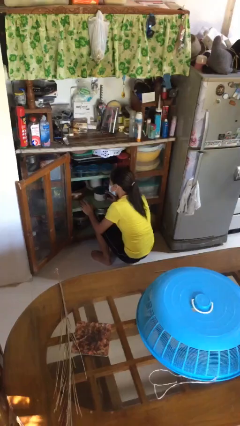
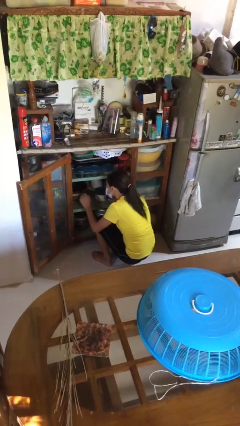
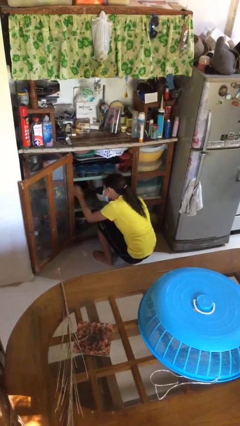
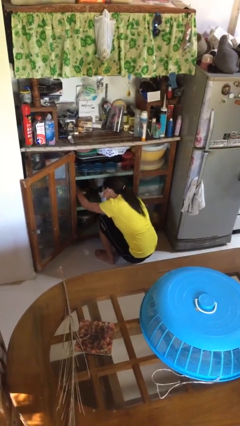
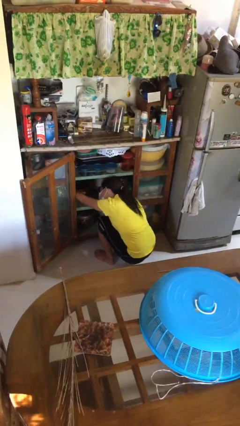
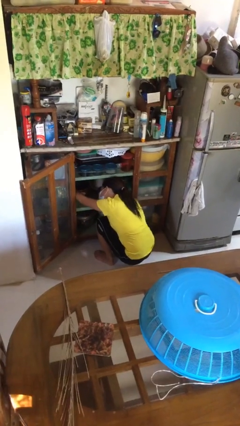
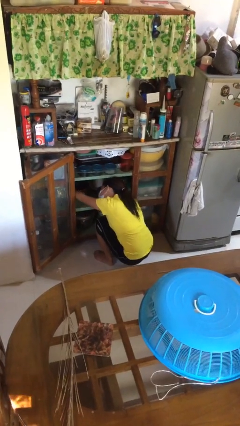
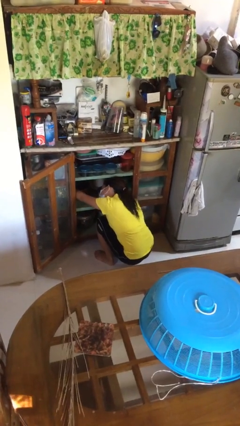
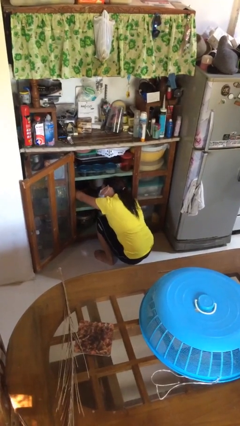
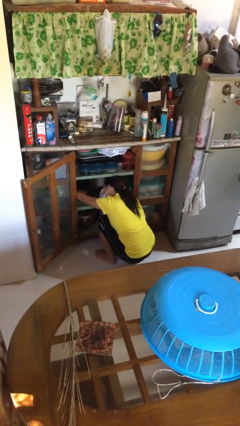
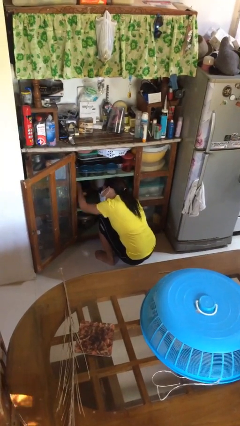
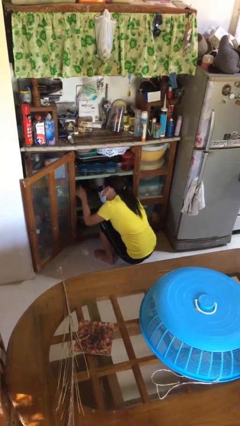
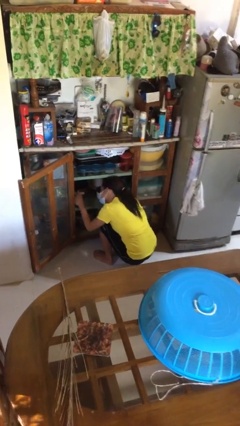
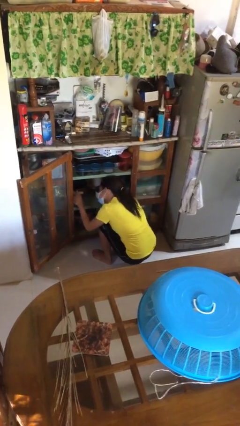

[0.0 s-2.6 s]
person searches in cabinet

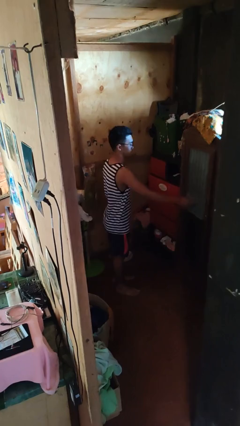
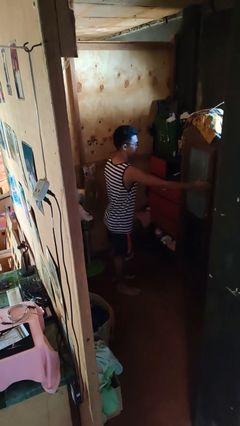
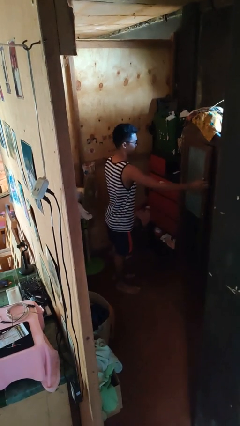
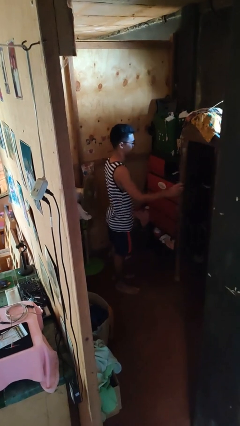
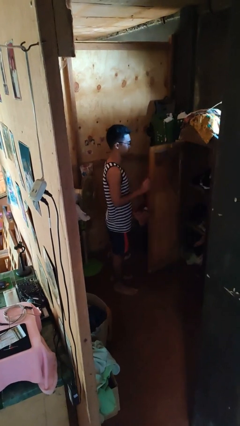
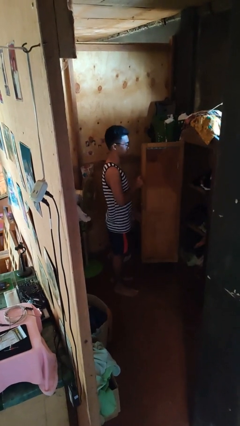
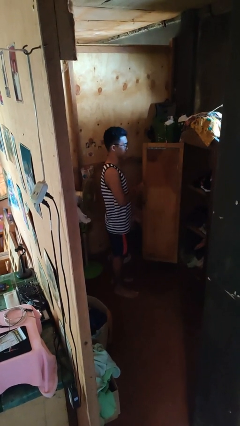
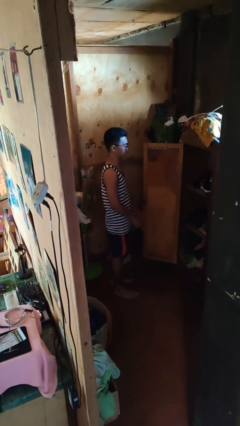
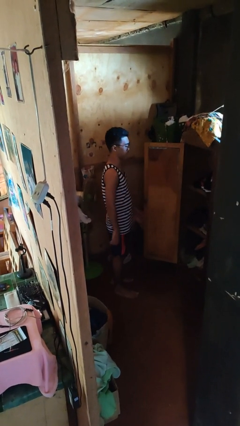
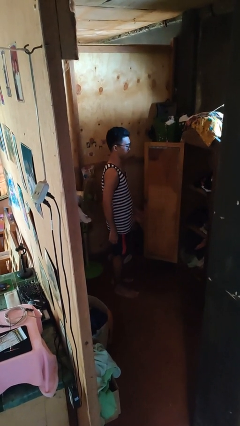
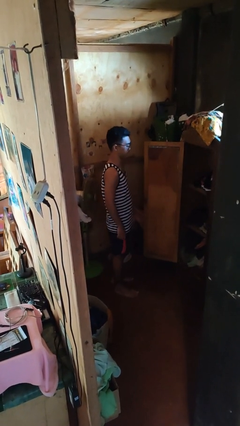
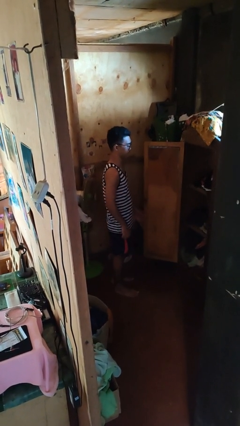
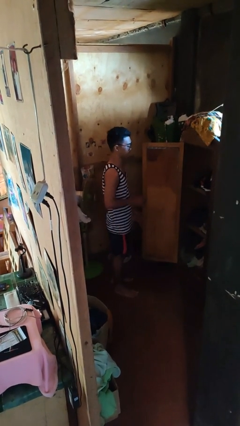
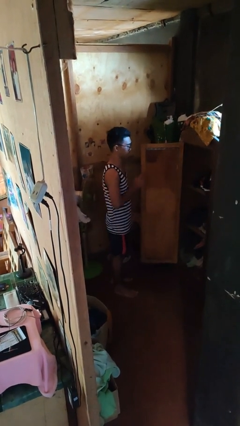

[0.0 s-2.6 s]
person opens closet door

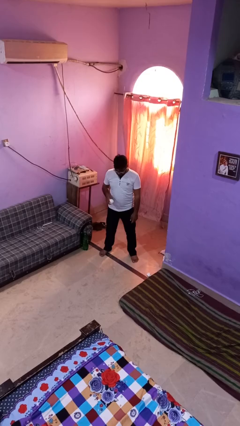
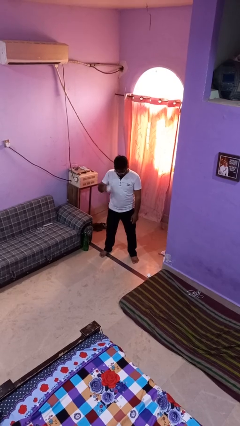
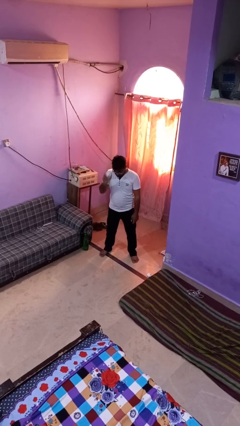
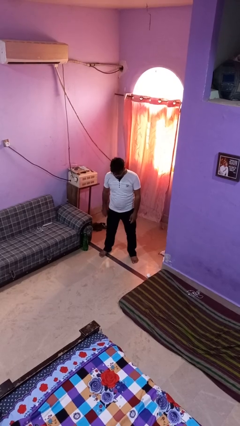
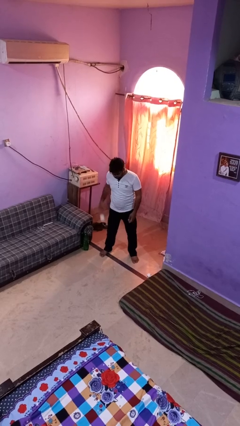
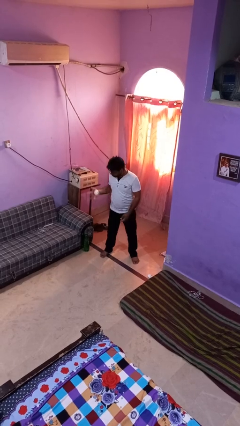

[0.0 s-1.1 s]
person bounces ball on floor

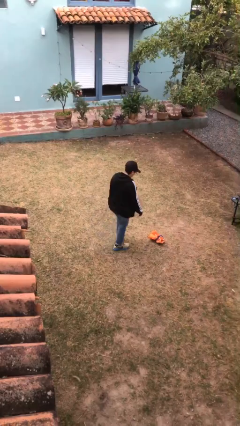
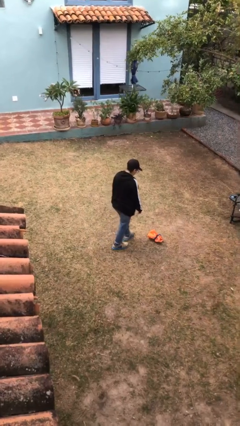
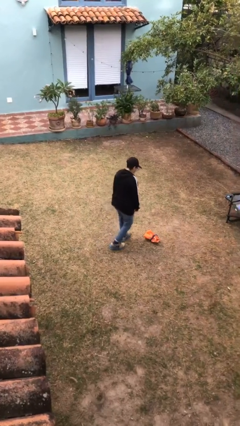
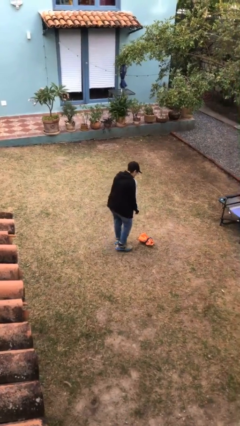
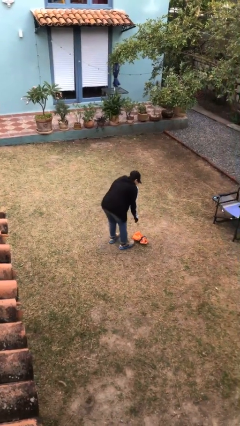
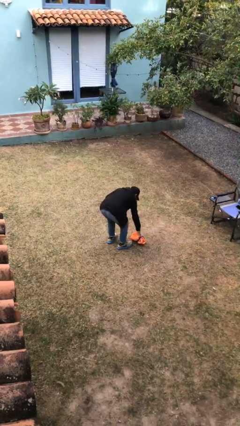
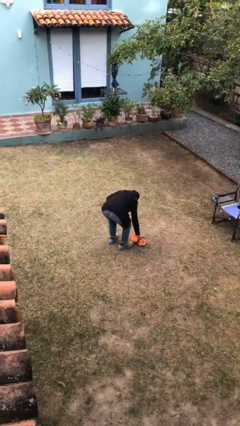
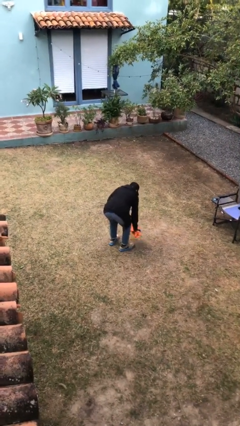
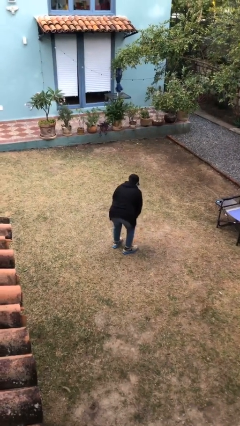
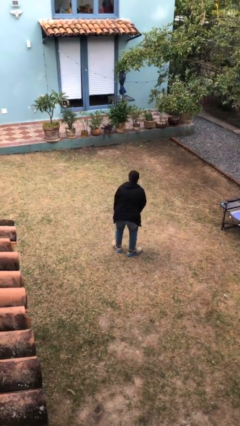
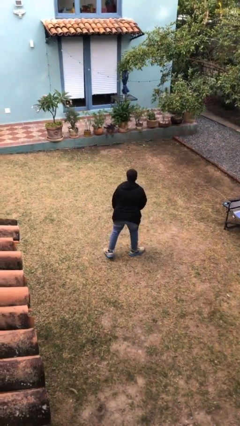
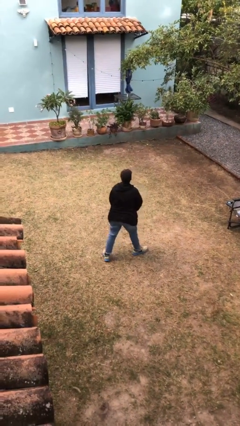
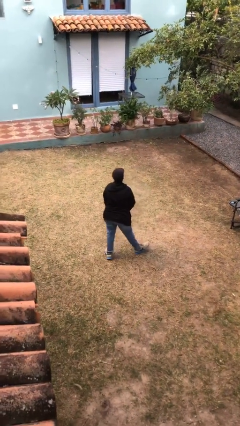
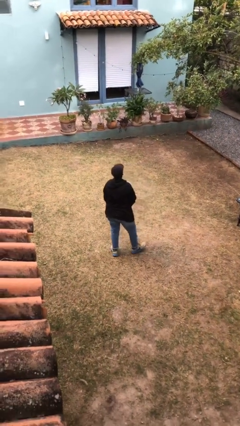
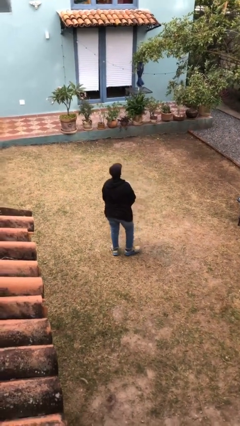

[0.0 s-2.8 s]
person picks up object from floor

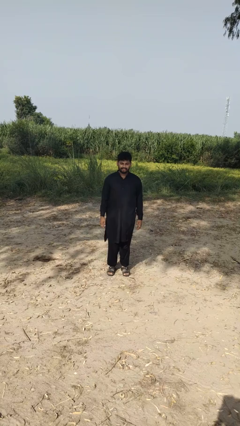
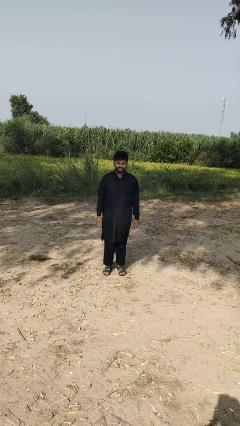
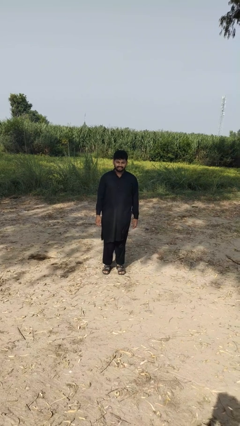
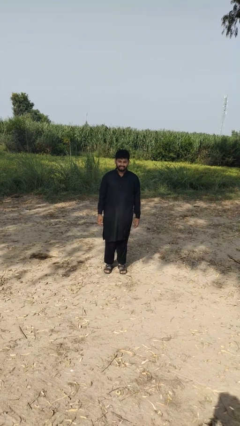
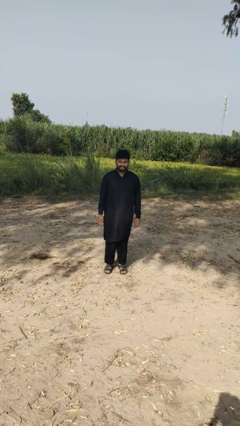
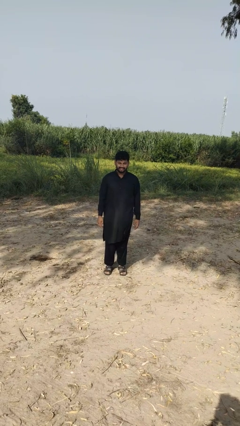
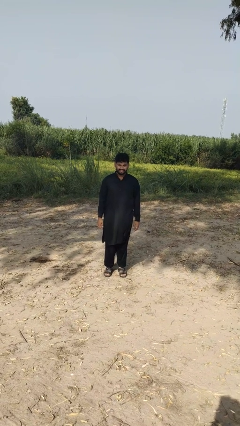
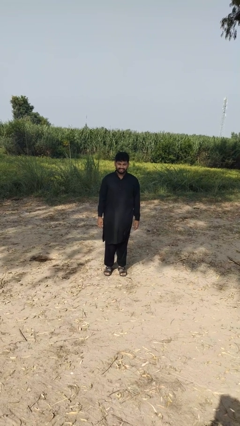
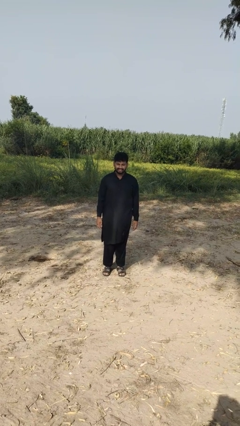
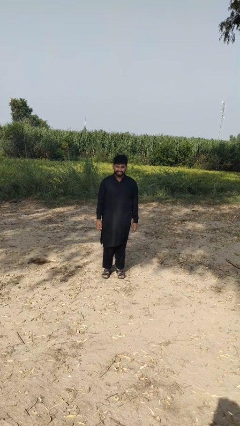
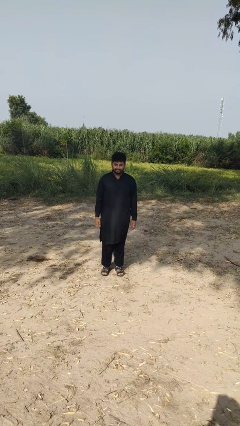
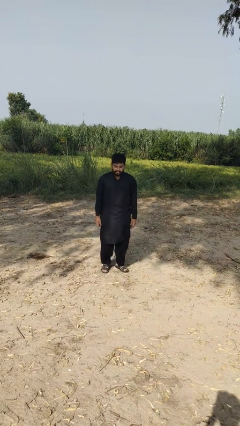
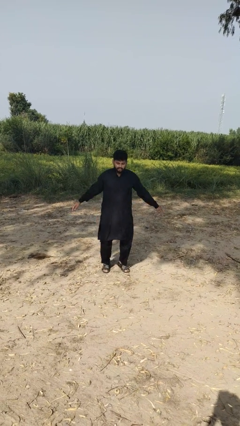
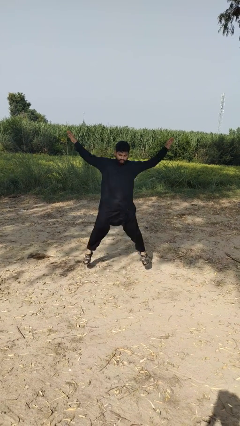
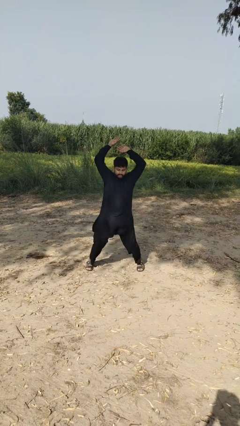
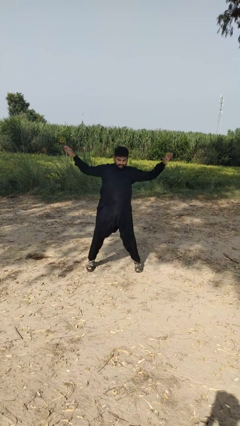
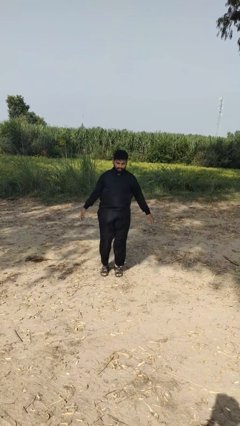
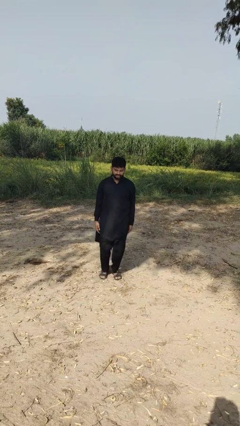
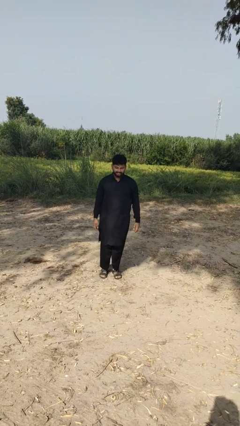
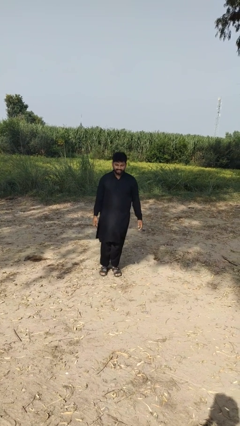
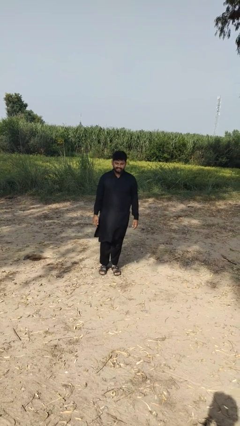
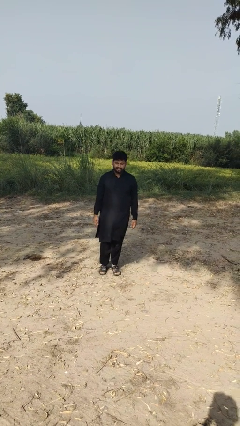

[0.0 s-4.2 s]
person exercises with jumping jacks

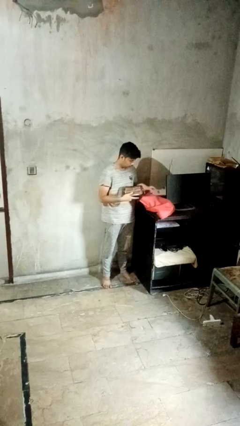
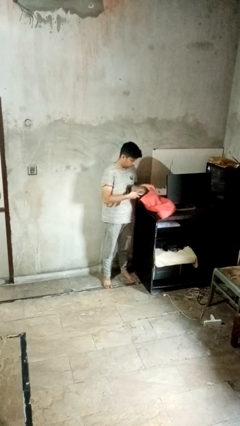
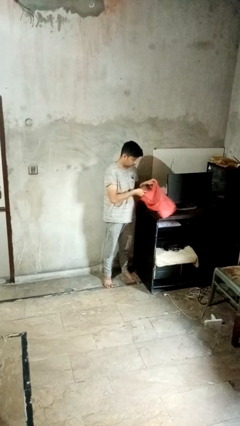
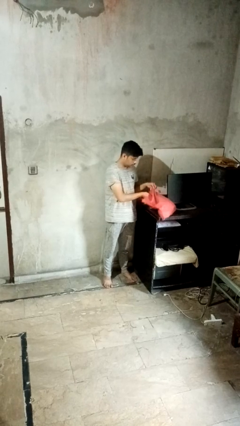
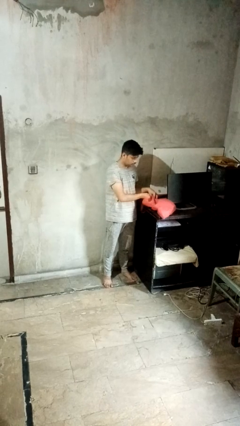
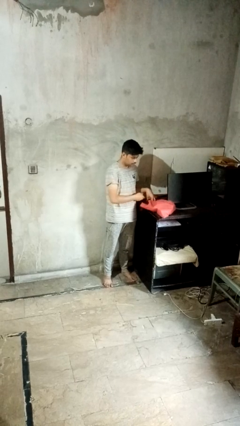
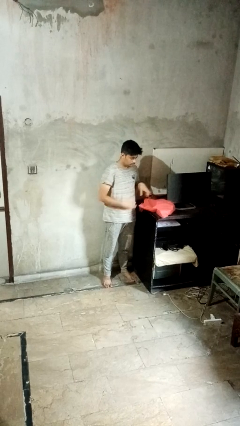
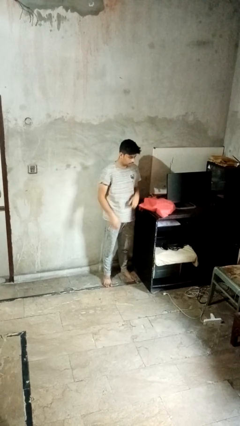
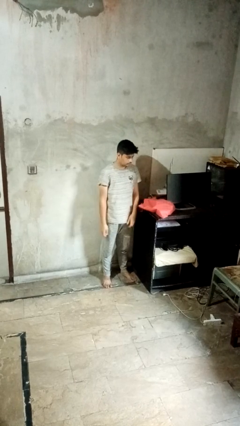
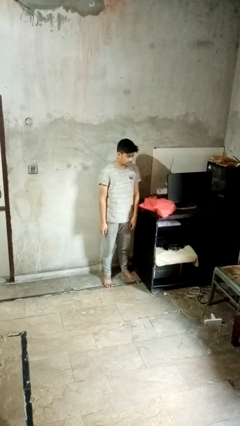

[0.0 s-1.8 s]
person puts object into bag

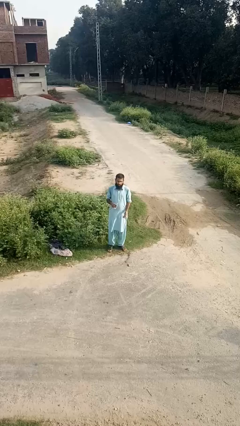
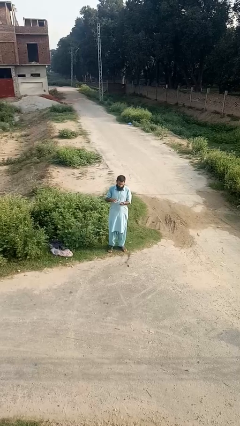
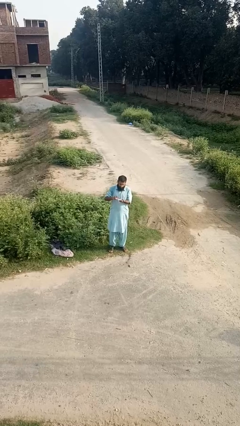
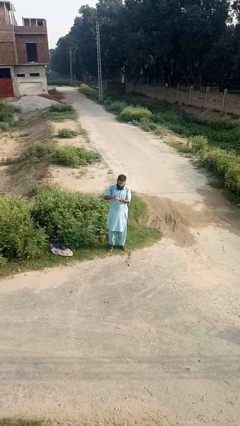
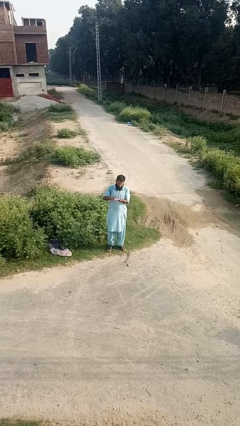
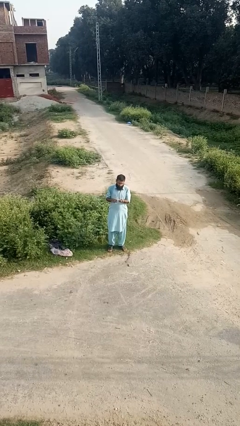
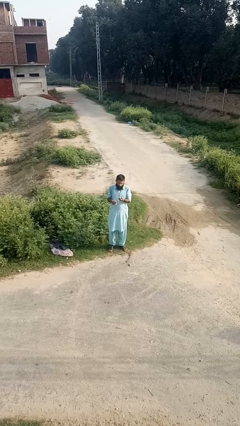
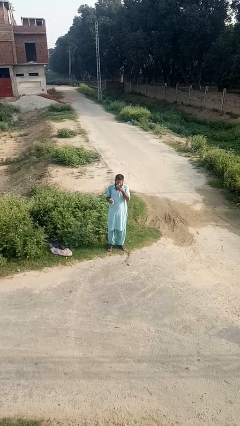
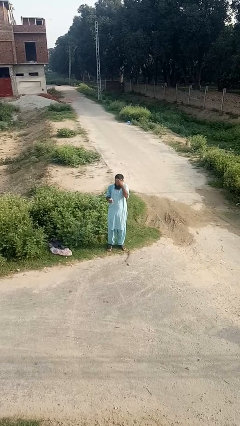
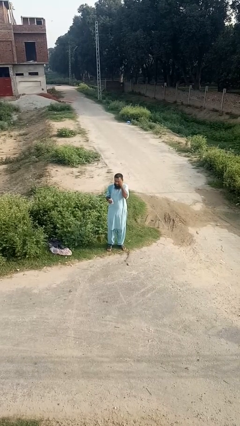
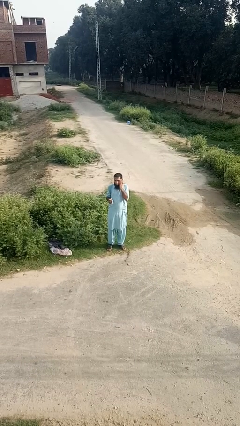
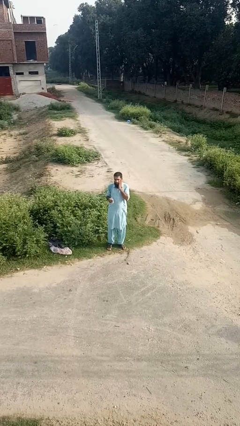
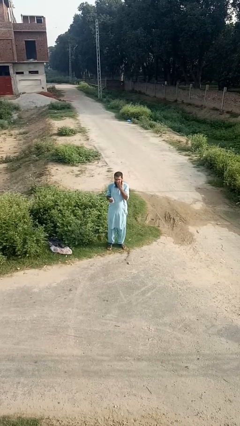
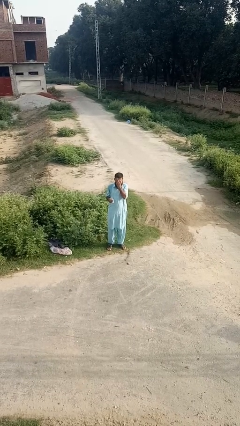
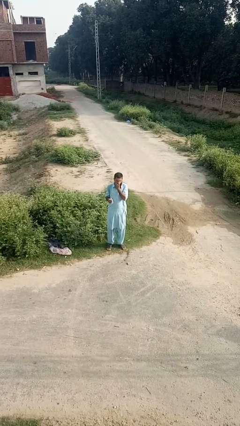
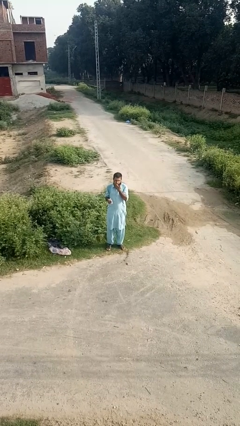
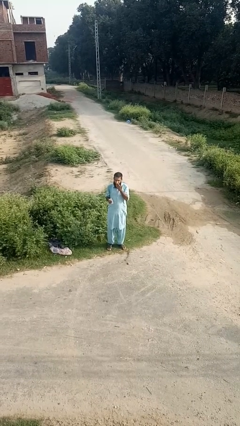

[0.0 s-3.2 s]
person applies facial moisturizer
